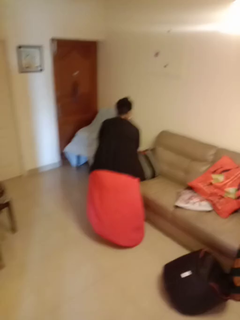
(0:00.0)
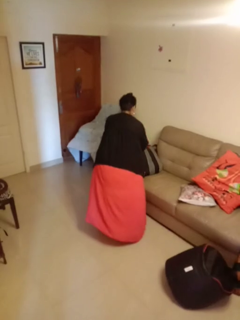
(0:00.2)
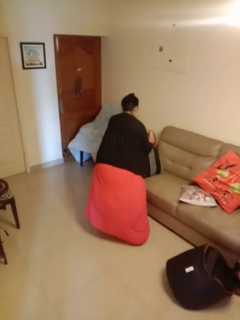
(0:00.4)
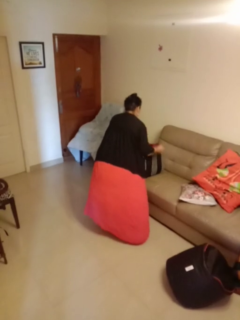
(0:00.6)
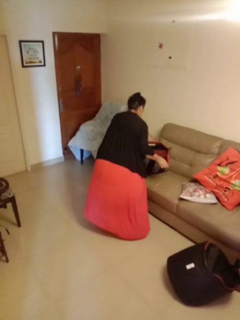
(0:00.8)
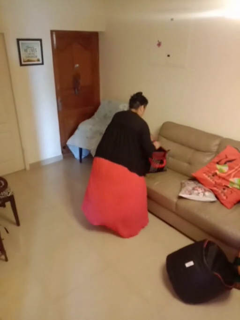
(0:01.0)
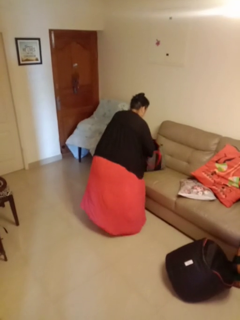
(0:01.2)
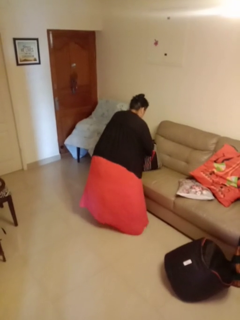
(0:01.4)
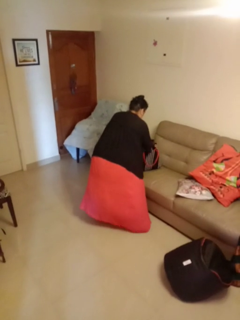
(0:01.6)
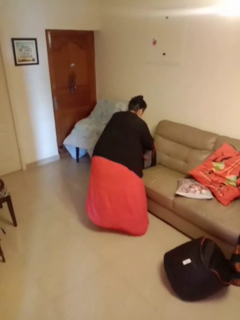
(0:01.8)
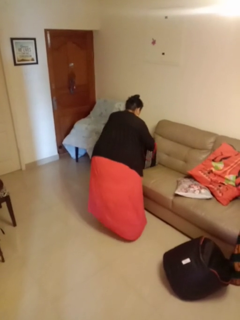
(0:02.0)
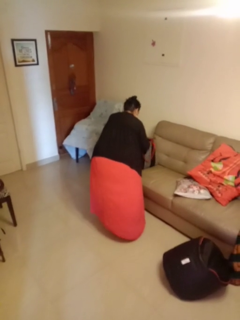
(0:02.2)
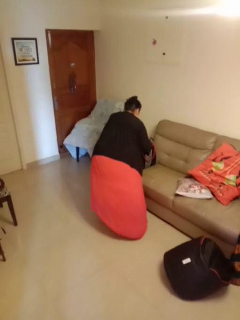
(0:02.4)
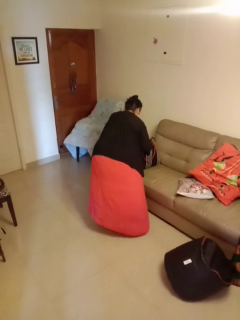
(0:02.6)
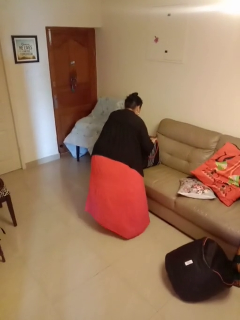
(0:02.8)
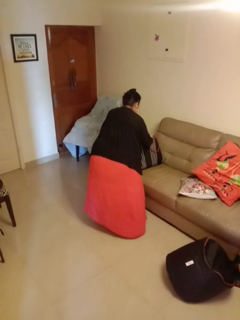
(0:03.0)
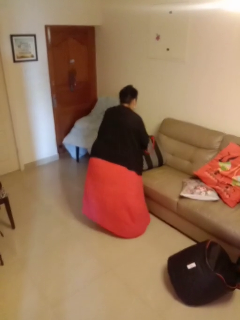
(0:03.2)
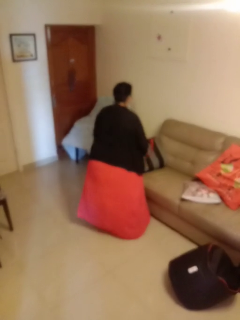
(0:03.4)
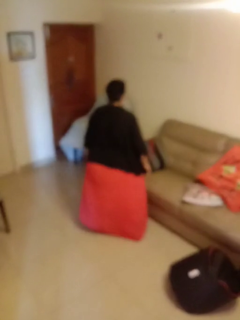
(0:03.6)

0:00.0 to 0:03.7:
person searches in bag

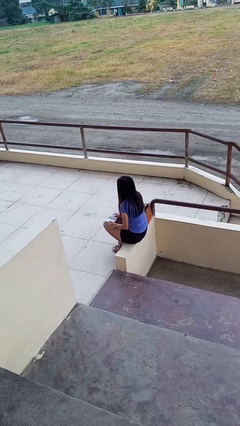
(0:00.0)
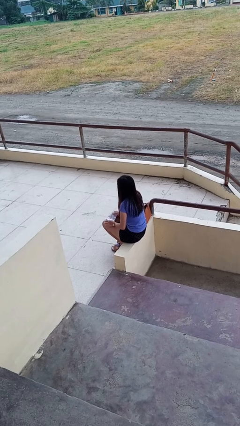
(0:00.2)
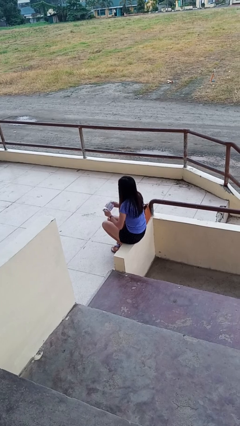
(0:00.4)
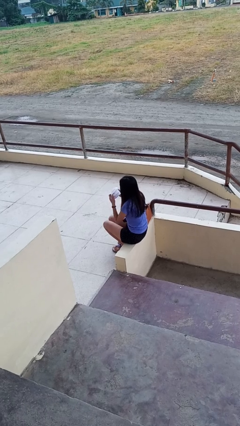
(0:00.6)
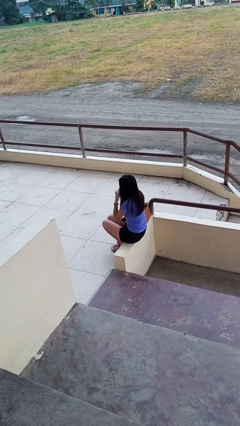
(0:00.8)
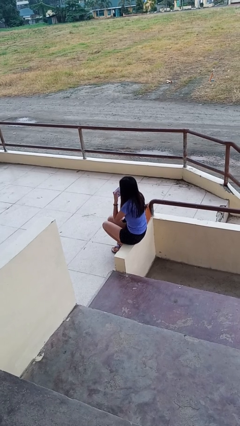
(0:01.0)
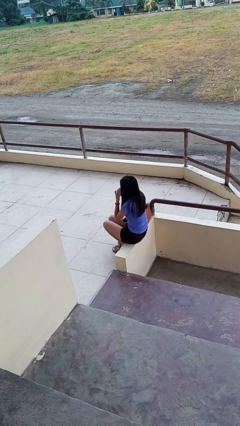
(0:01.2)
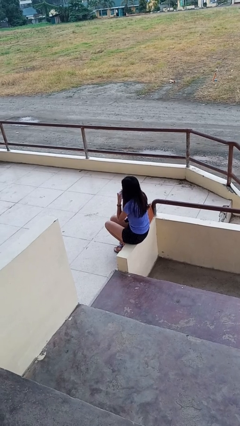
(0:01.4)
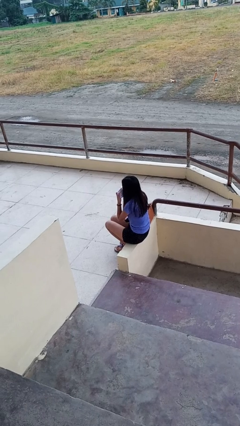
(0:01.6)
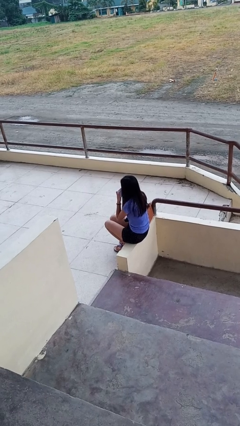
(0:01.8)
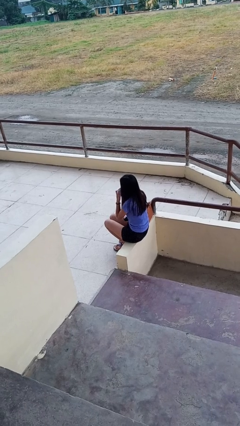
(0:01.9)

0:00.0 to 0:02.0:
person wipes mouth with napkin

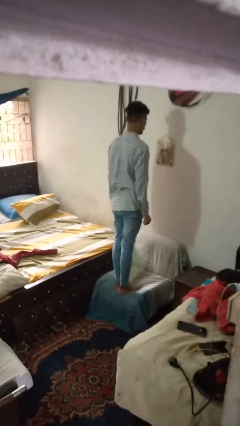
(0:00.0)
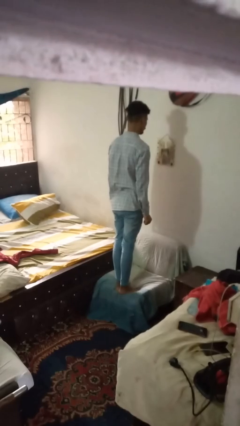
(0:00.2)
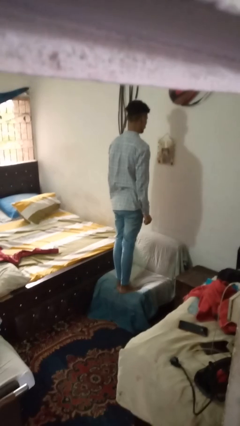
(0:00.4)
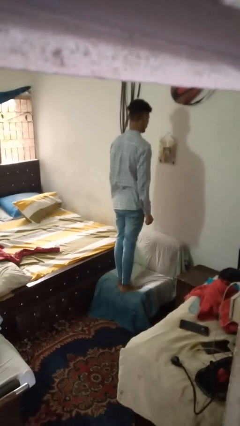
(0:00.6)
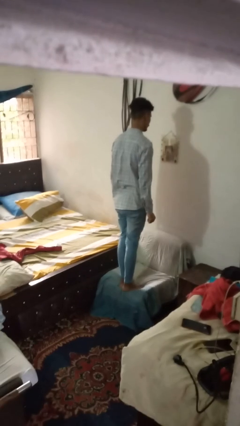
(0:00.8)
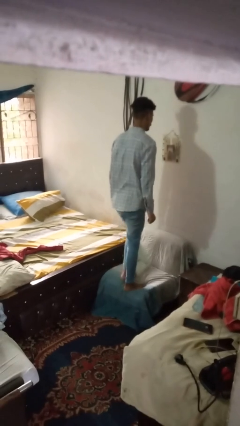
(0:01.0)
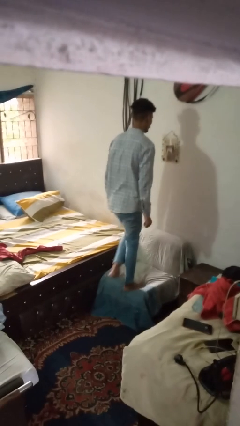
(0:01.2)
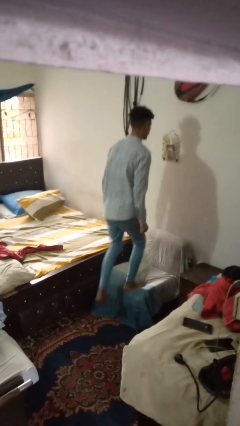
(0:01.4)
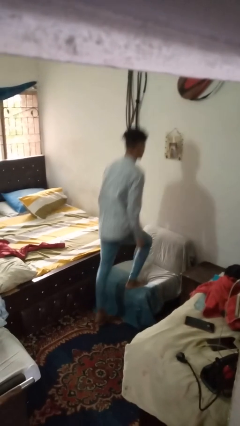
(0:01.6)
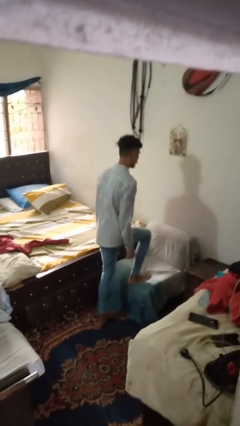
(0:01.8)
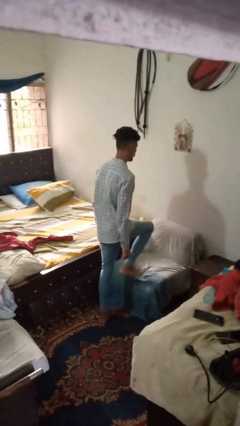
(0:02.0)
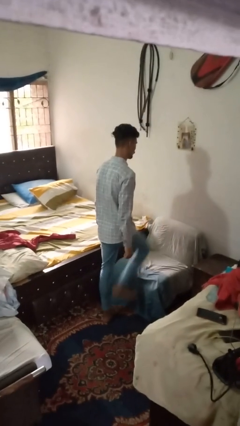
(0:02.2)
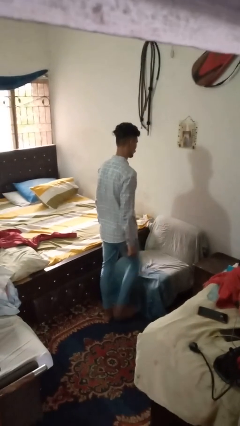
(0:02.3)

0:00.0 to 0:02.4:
person climbs off couch

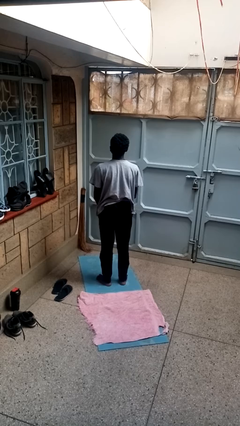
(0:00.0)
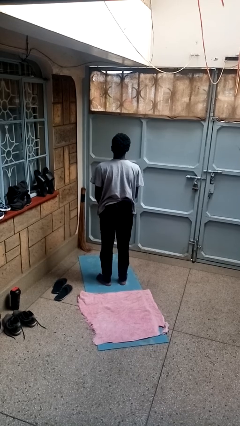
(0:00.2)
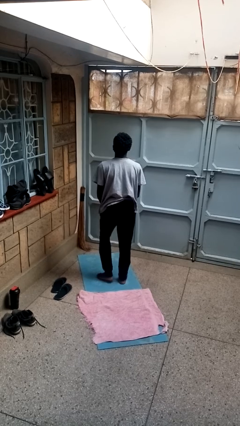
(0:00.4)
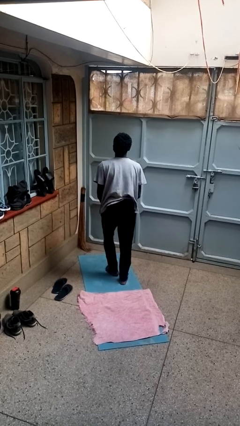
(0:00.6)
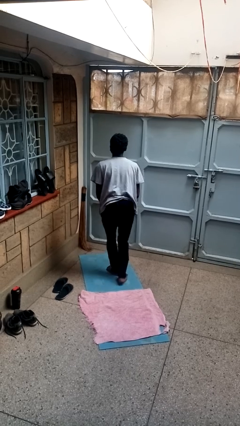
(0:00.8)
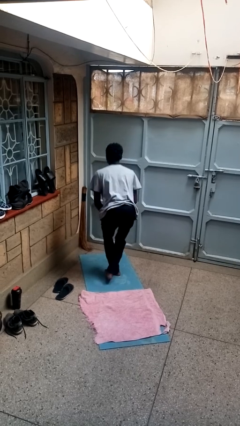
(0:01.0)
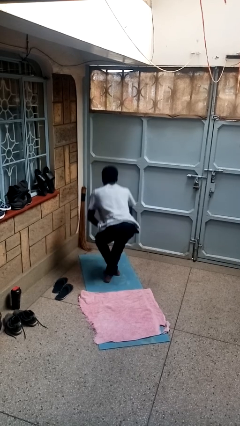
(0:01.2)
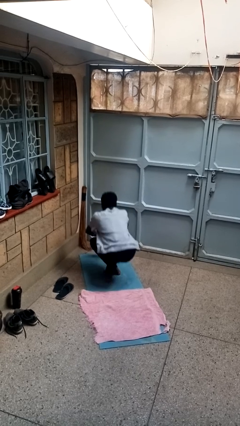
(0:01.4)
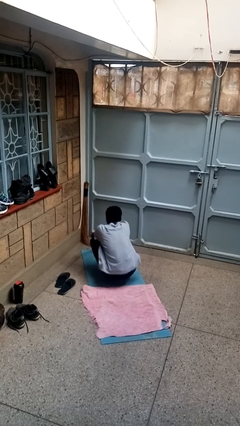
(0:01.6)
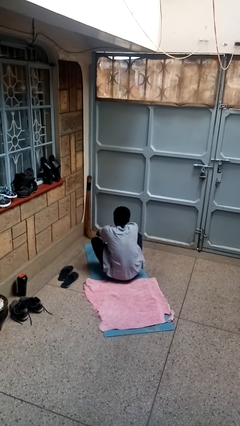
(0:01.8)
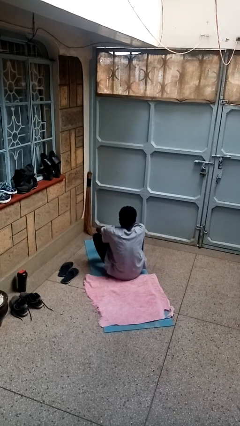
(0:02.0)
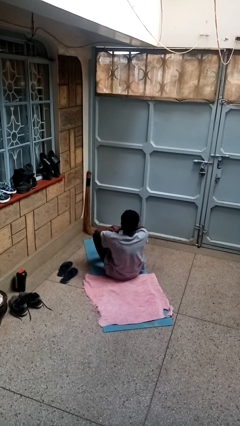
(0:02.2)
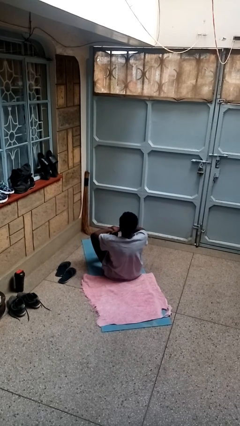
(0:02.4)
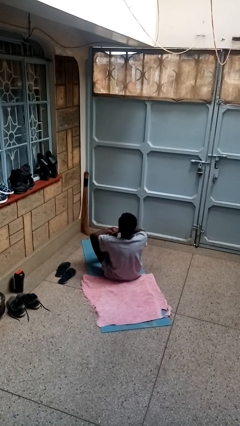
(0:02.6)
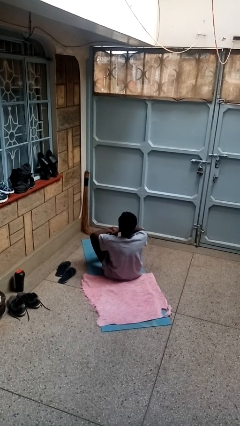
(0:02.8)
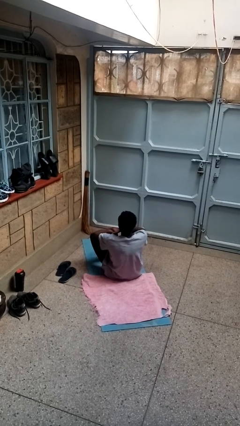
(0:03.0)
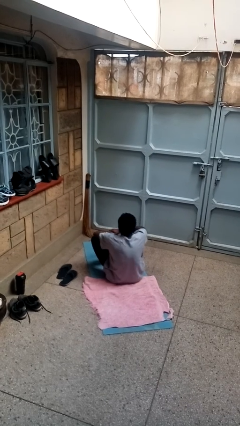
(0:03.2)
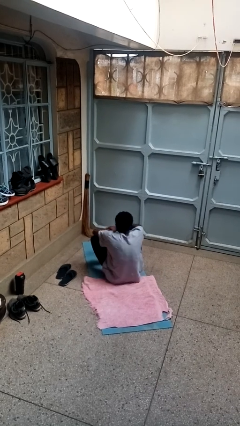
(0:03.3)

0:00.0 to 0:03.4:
person sits crisscross

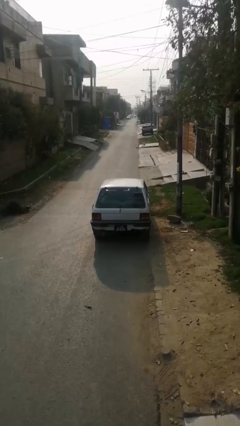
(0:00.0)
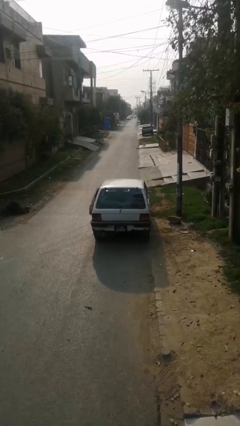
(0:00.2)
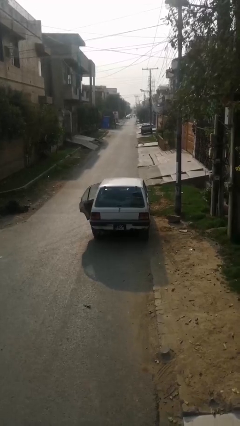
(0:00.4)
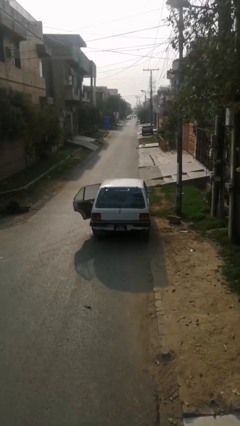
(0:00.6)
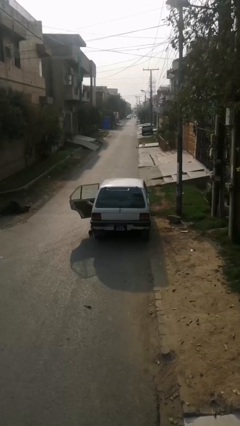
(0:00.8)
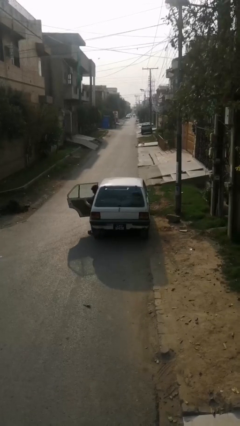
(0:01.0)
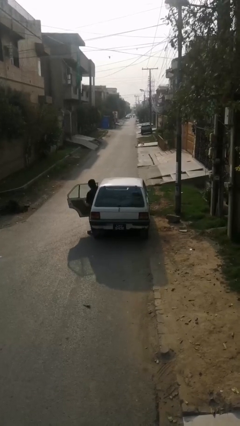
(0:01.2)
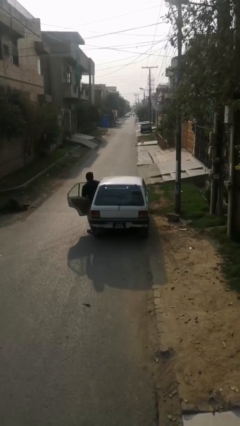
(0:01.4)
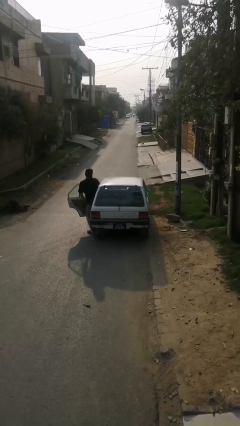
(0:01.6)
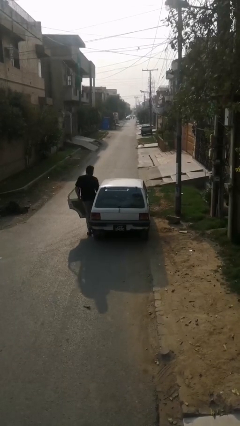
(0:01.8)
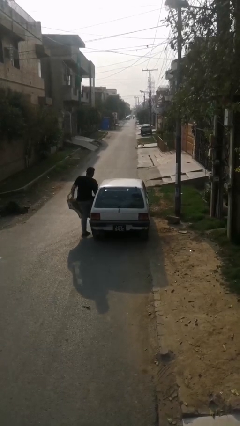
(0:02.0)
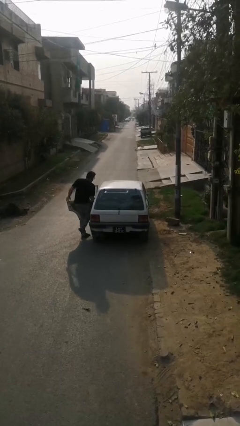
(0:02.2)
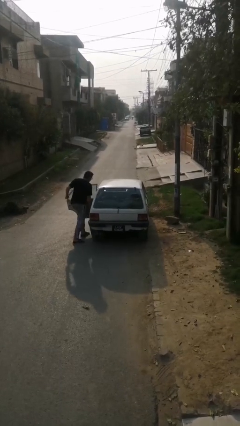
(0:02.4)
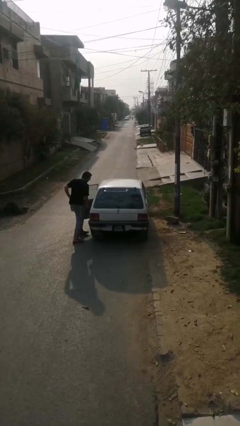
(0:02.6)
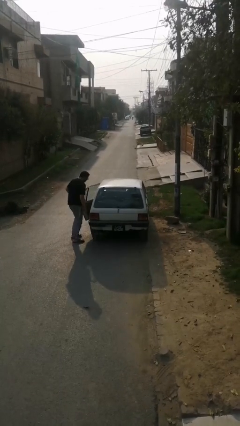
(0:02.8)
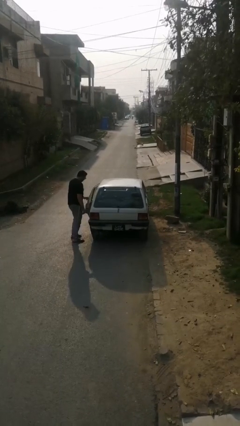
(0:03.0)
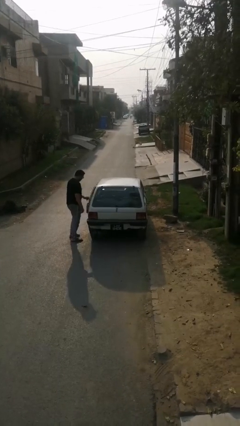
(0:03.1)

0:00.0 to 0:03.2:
car drops off person

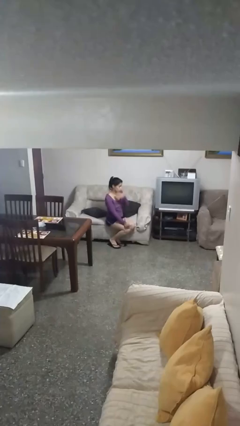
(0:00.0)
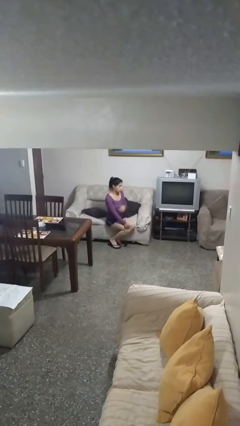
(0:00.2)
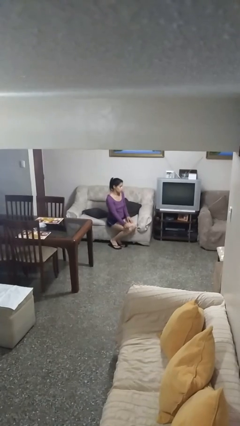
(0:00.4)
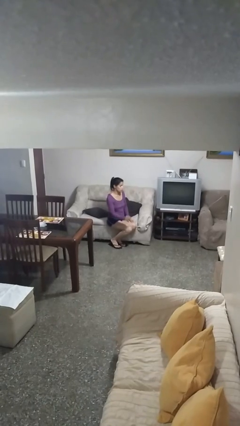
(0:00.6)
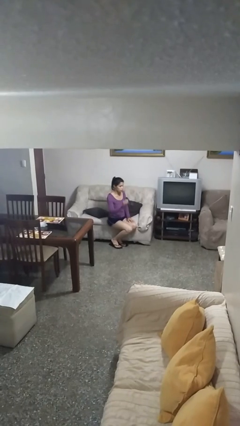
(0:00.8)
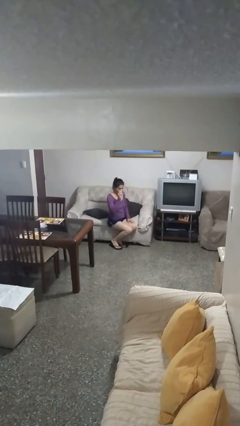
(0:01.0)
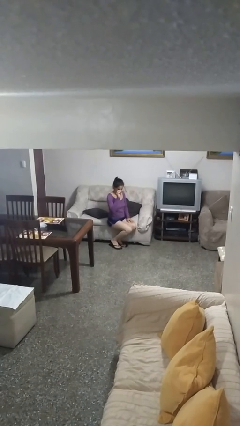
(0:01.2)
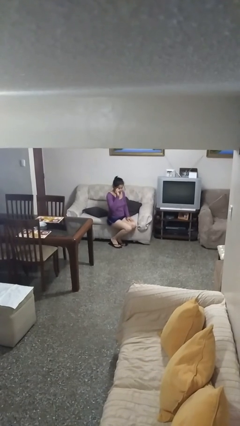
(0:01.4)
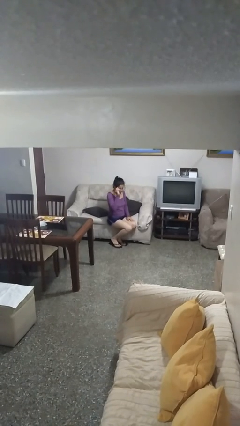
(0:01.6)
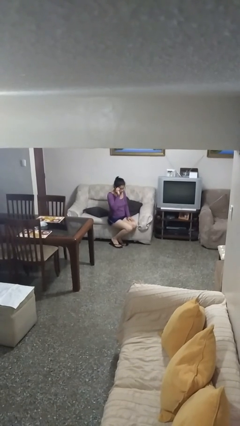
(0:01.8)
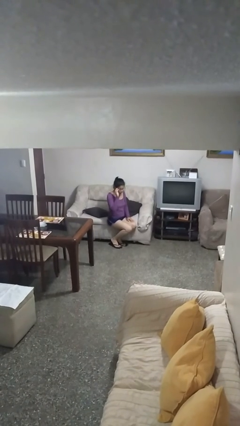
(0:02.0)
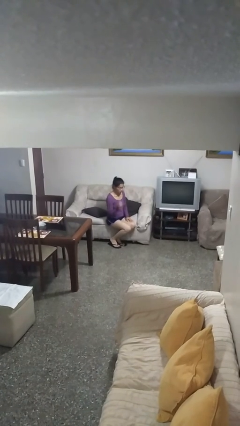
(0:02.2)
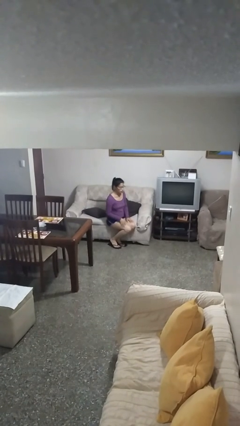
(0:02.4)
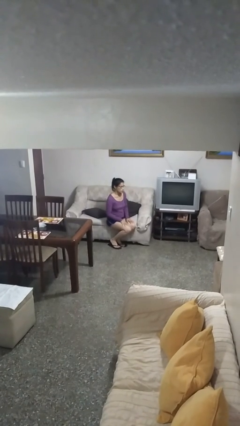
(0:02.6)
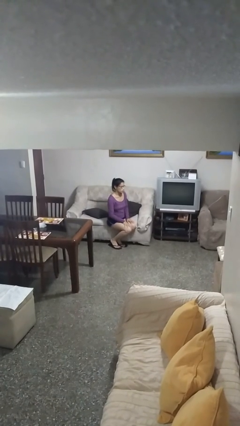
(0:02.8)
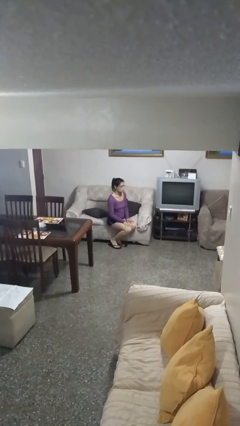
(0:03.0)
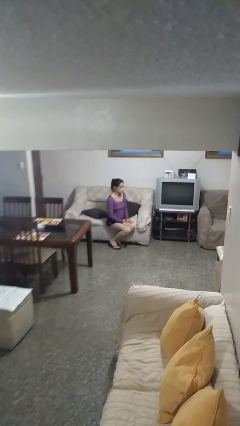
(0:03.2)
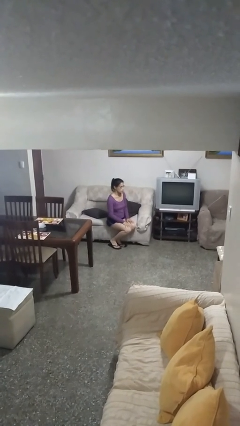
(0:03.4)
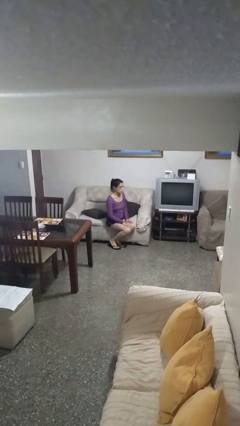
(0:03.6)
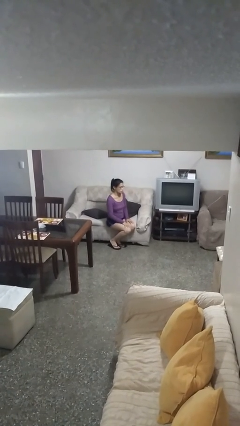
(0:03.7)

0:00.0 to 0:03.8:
person puts on glasses
